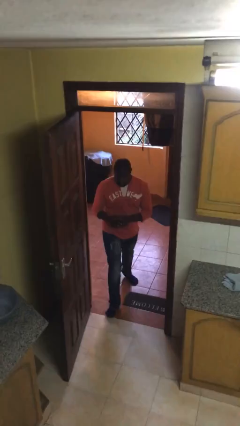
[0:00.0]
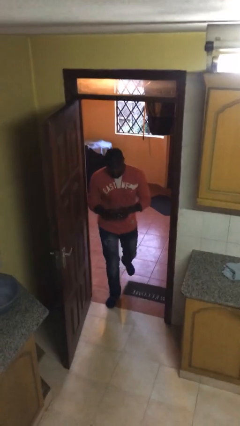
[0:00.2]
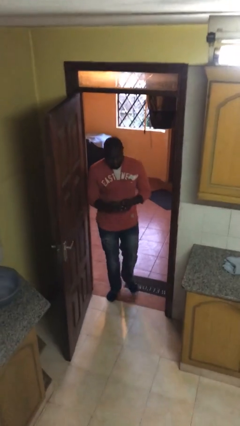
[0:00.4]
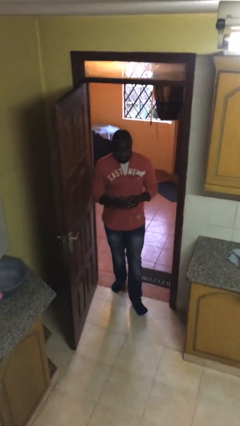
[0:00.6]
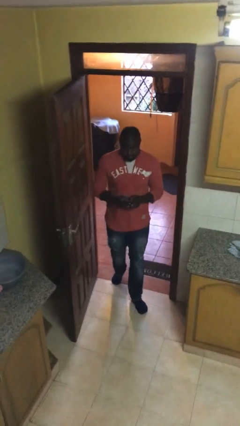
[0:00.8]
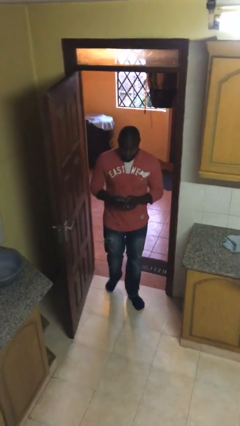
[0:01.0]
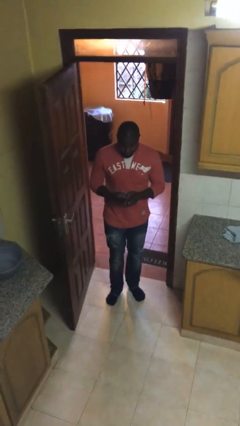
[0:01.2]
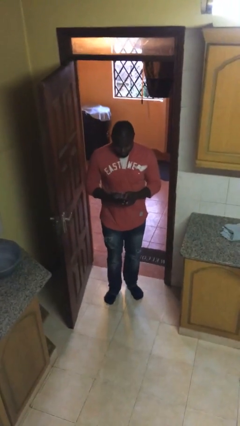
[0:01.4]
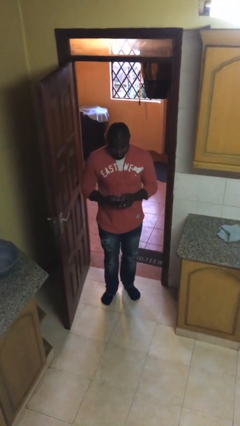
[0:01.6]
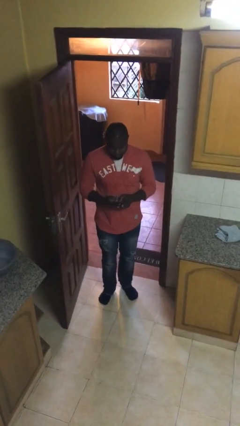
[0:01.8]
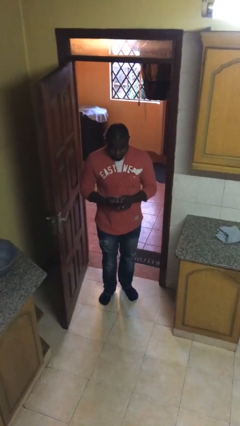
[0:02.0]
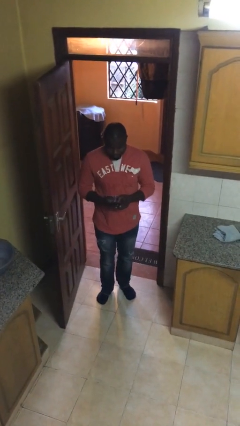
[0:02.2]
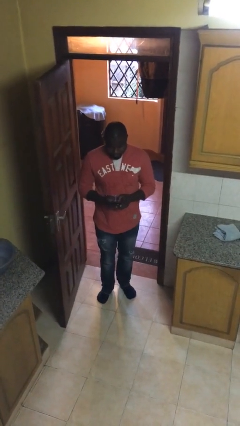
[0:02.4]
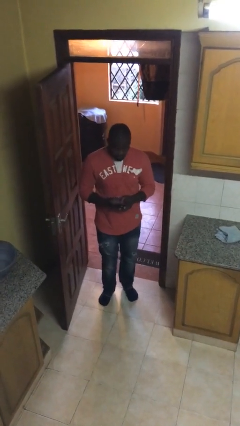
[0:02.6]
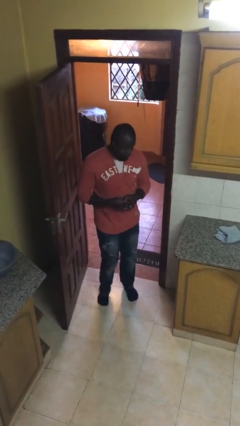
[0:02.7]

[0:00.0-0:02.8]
person enters scene through structure

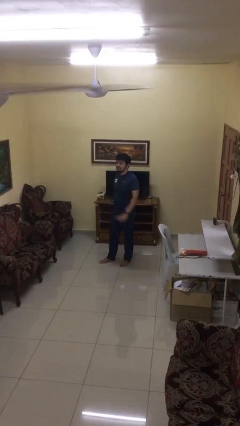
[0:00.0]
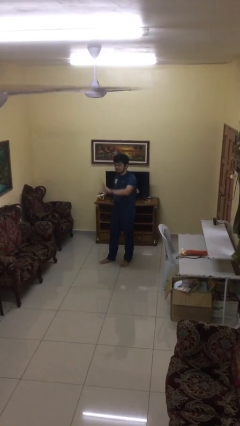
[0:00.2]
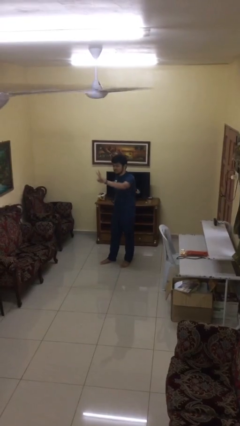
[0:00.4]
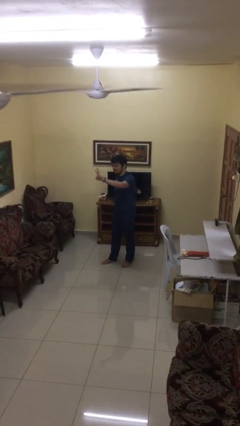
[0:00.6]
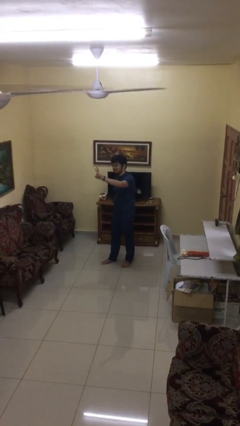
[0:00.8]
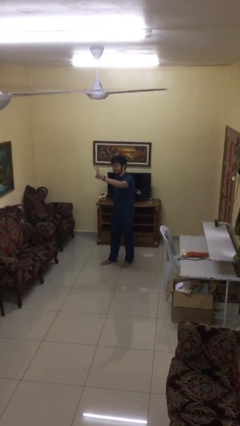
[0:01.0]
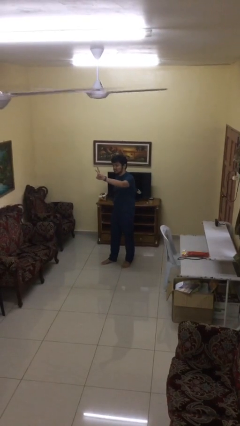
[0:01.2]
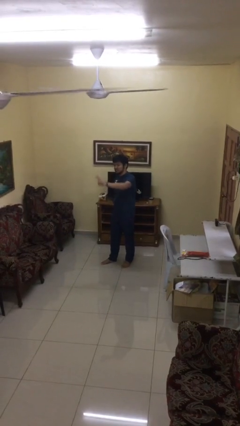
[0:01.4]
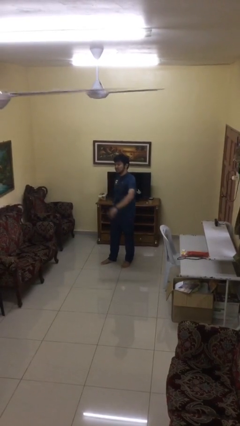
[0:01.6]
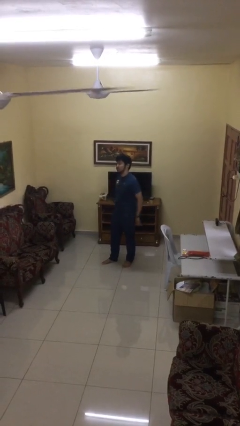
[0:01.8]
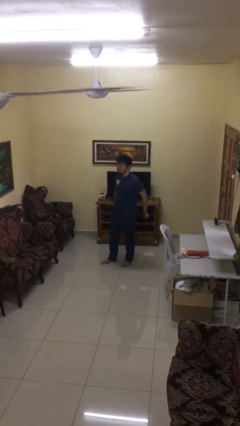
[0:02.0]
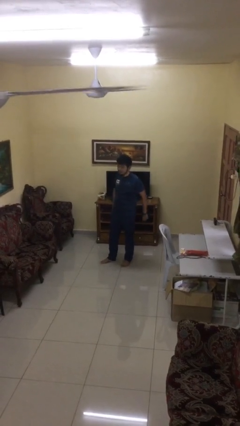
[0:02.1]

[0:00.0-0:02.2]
person gestures peace

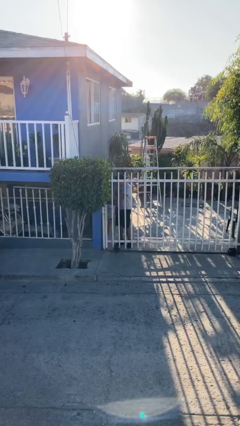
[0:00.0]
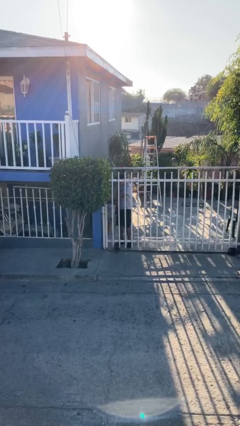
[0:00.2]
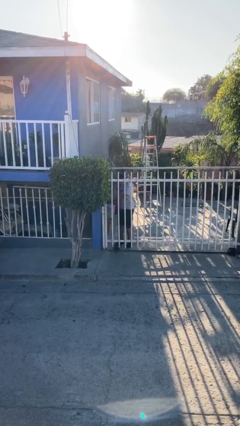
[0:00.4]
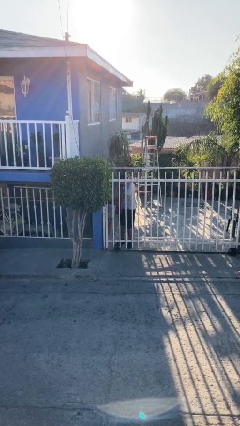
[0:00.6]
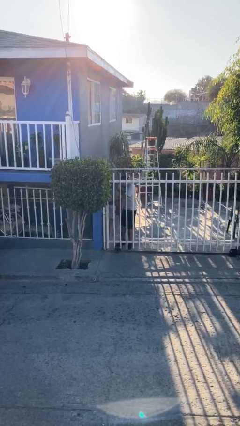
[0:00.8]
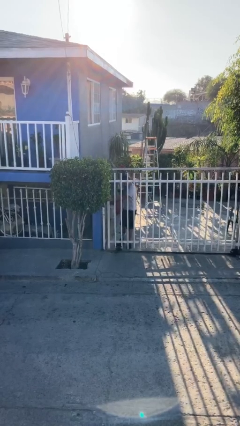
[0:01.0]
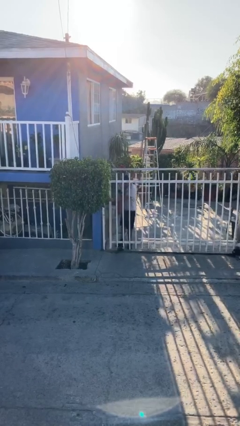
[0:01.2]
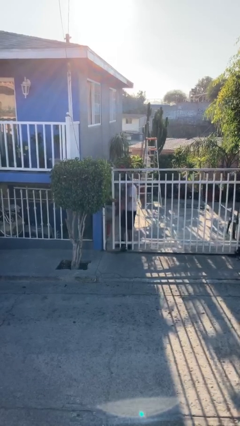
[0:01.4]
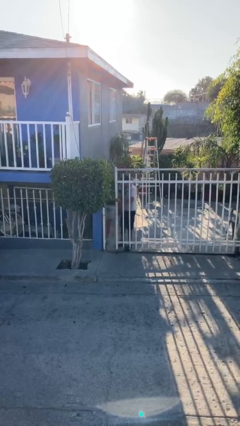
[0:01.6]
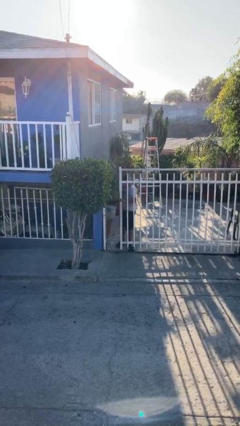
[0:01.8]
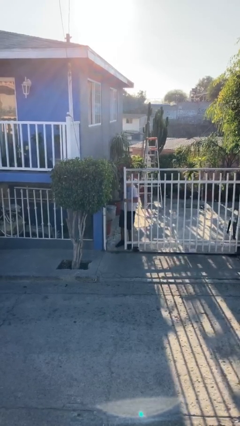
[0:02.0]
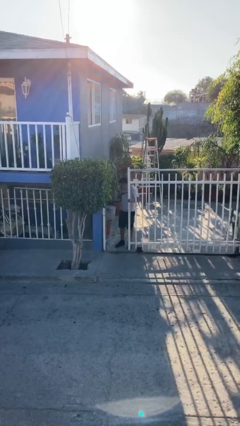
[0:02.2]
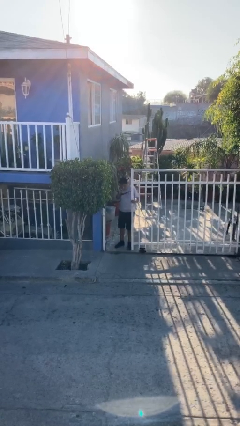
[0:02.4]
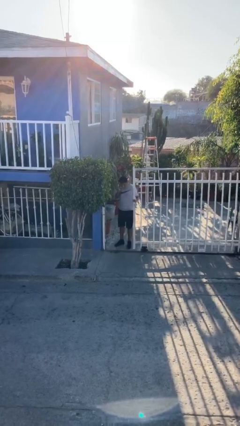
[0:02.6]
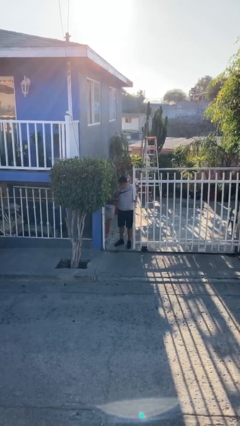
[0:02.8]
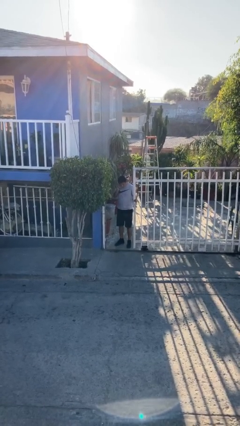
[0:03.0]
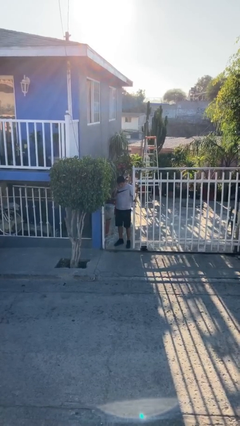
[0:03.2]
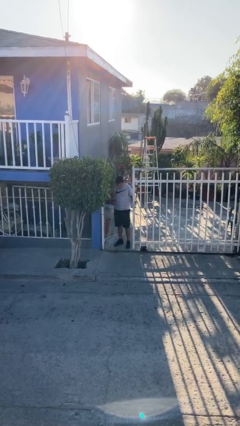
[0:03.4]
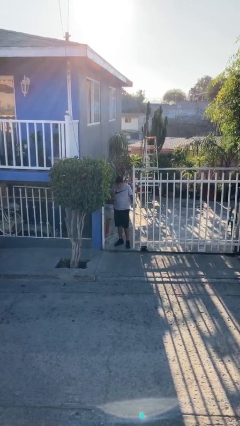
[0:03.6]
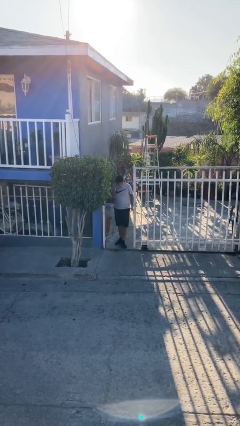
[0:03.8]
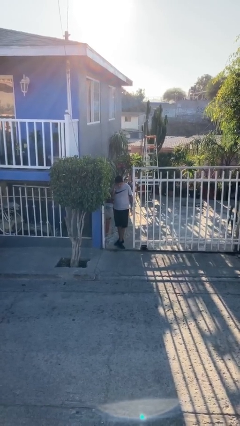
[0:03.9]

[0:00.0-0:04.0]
person opens facility door

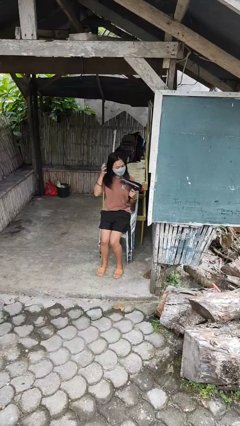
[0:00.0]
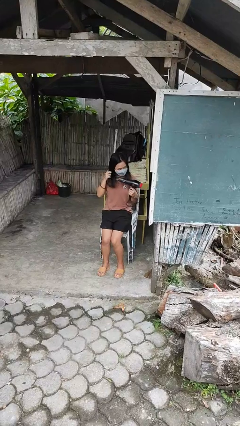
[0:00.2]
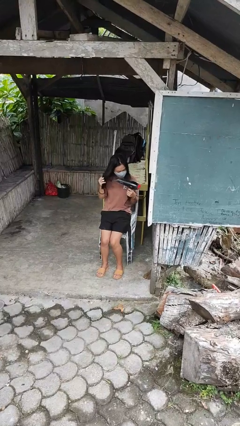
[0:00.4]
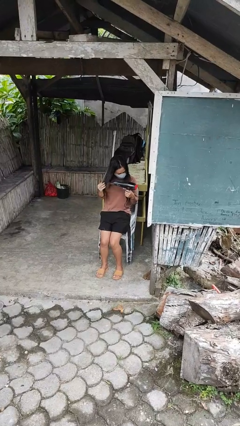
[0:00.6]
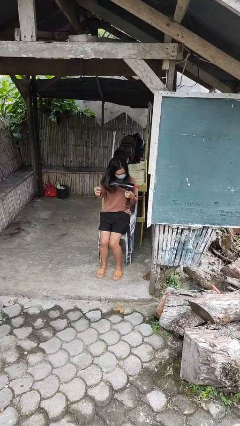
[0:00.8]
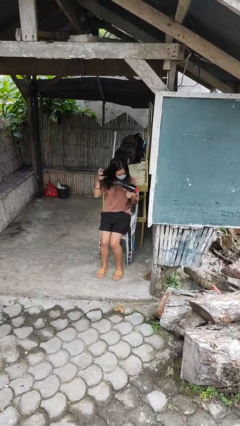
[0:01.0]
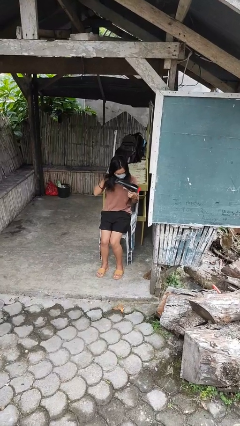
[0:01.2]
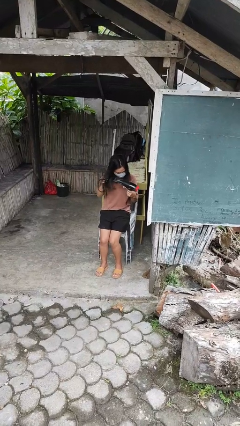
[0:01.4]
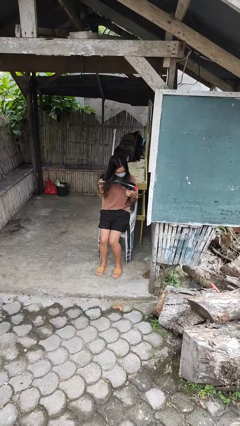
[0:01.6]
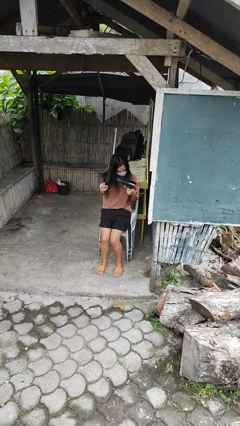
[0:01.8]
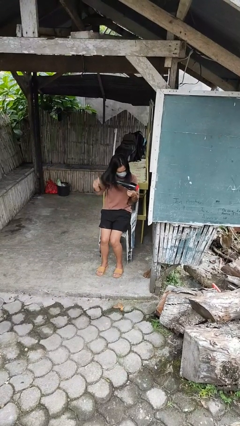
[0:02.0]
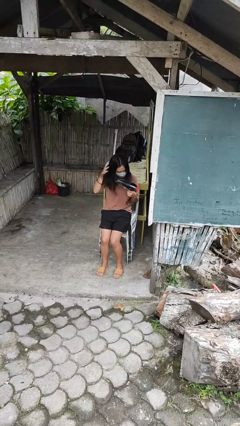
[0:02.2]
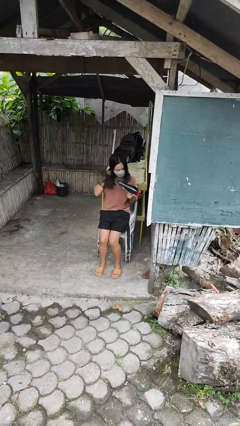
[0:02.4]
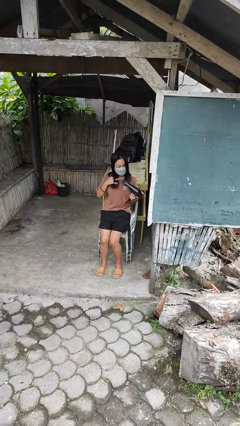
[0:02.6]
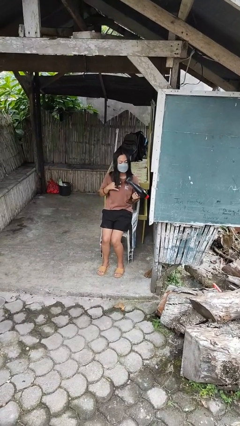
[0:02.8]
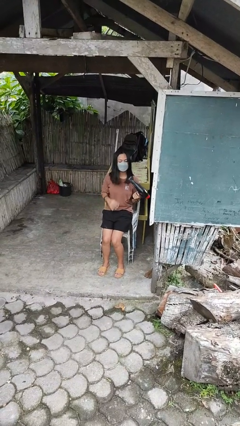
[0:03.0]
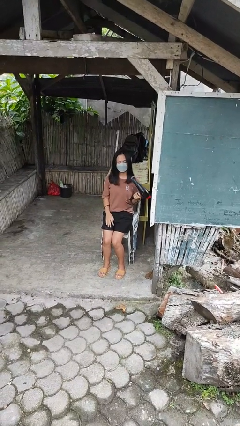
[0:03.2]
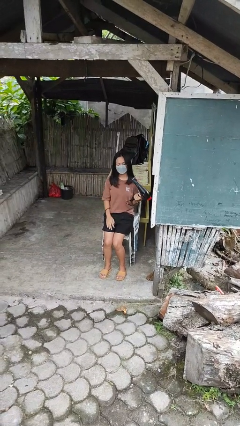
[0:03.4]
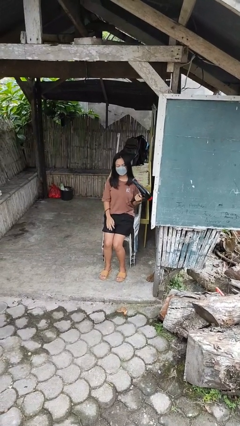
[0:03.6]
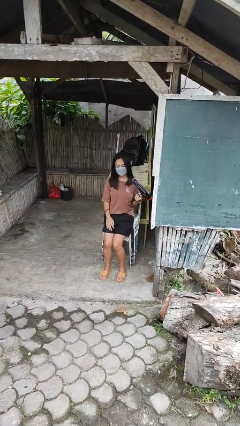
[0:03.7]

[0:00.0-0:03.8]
person dries hair with hairdryer

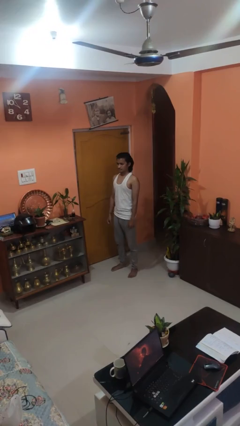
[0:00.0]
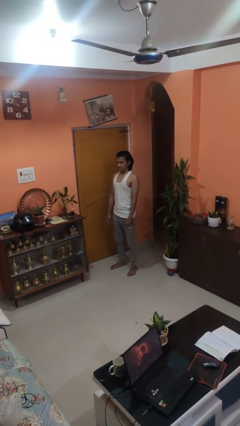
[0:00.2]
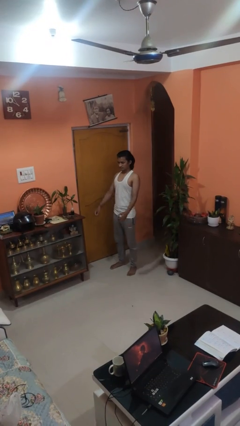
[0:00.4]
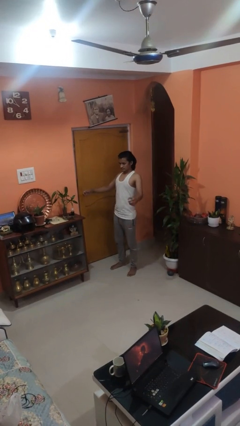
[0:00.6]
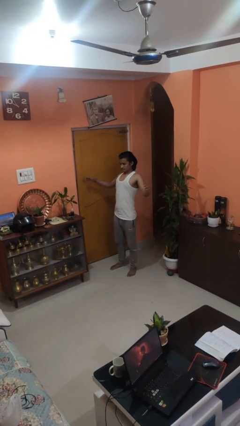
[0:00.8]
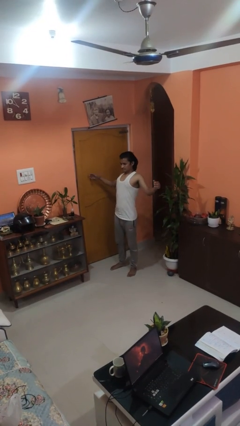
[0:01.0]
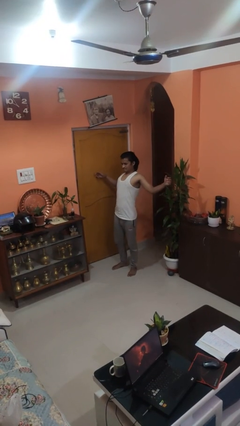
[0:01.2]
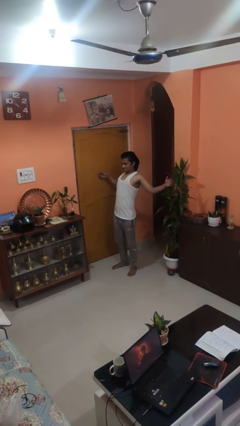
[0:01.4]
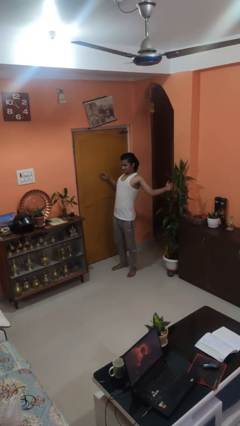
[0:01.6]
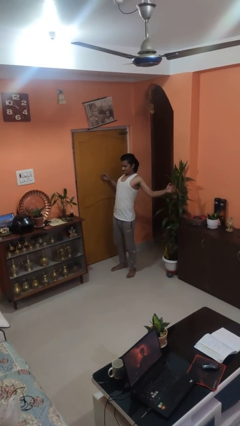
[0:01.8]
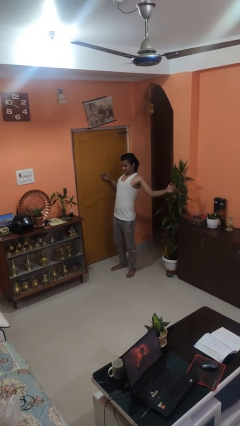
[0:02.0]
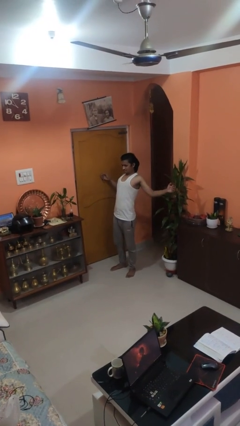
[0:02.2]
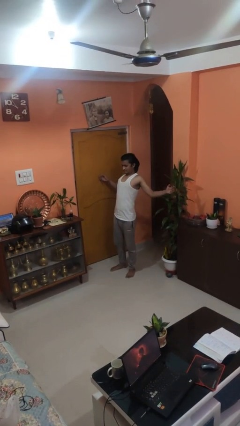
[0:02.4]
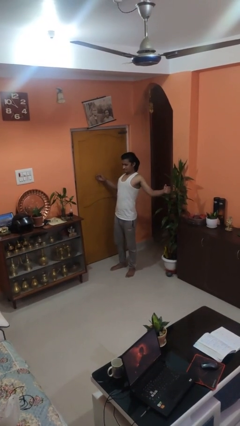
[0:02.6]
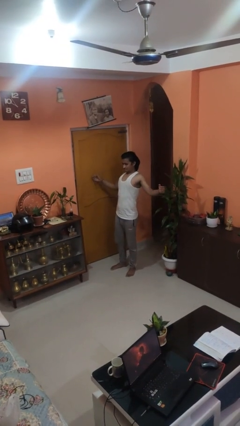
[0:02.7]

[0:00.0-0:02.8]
person stretches arms to side

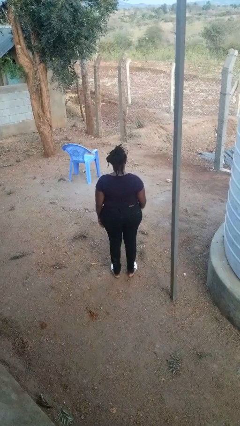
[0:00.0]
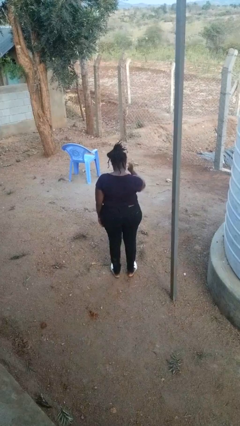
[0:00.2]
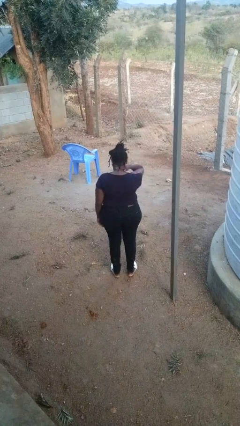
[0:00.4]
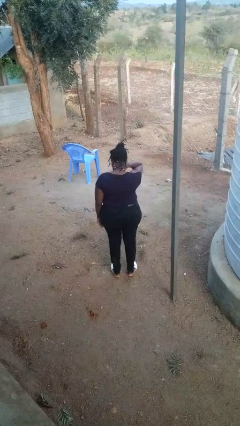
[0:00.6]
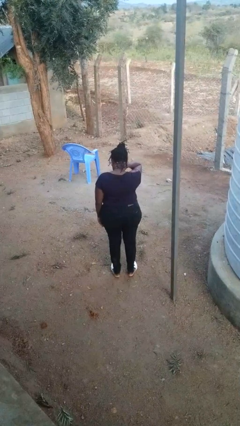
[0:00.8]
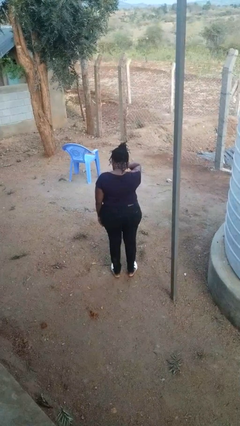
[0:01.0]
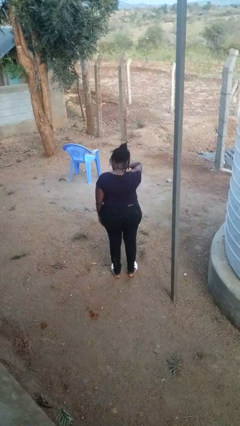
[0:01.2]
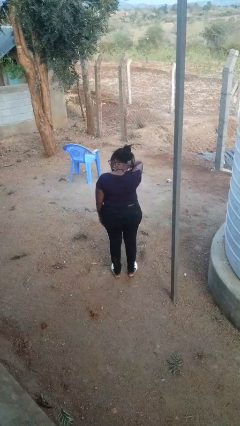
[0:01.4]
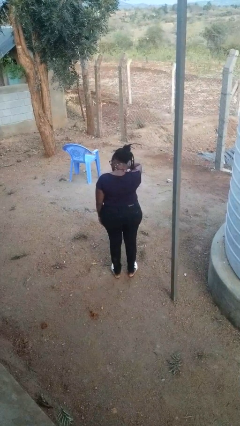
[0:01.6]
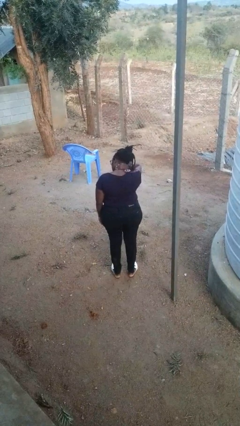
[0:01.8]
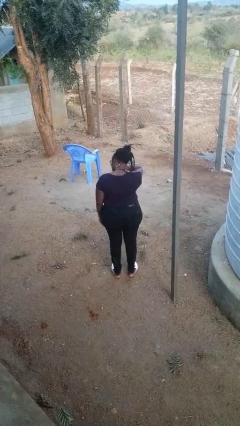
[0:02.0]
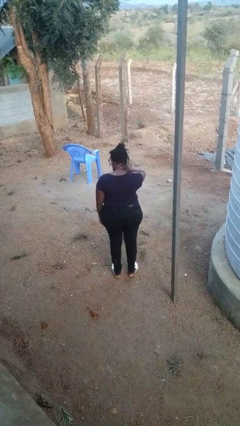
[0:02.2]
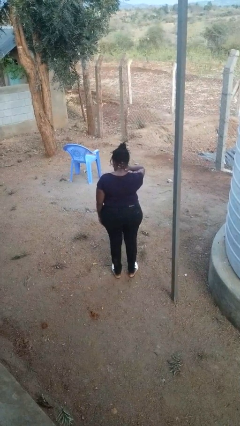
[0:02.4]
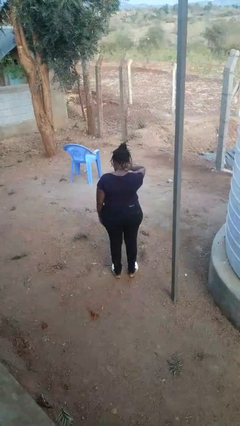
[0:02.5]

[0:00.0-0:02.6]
person rubs neck
